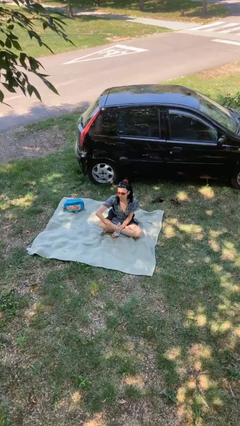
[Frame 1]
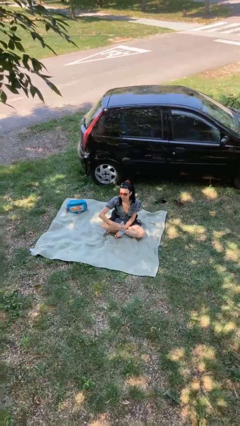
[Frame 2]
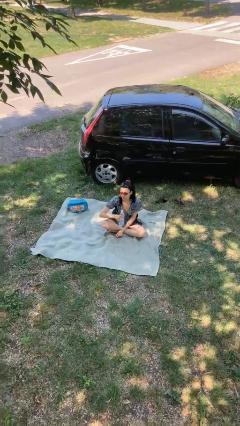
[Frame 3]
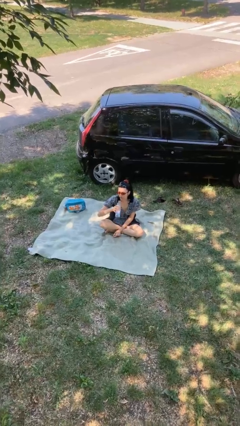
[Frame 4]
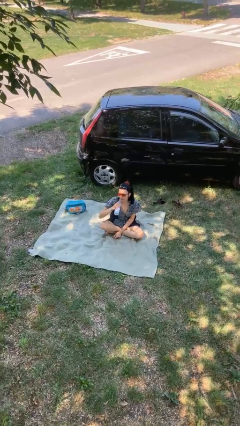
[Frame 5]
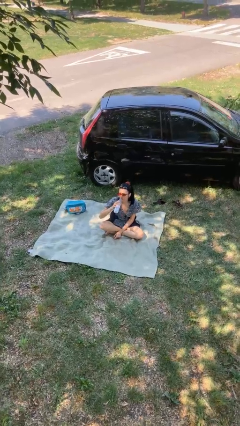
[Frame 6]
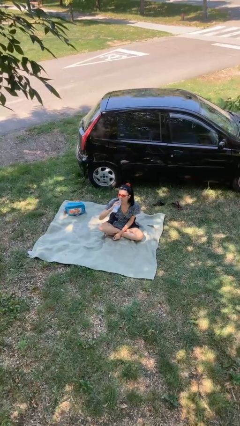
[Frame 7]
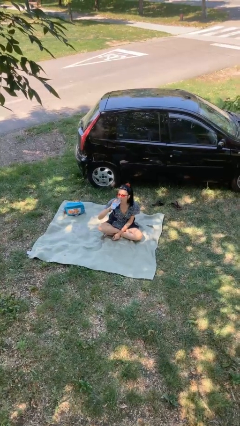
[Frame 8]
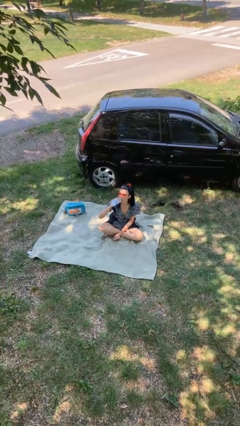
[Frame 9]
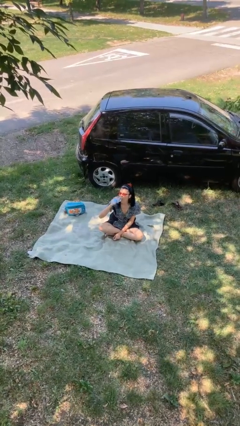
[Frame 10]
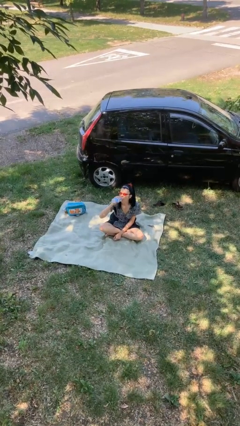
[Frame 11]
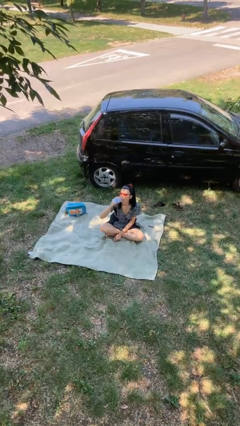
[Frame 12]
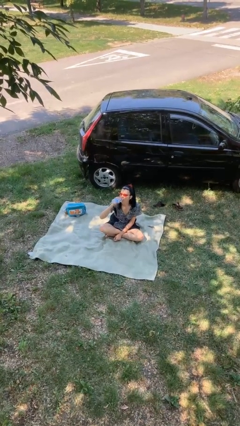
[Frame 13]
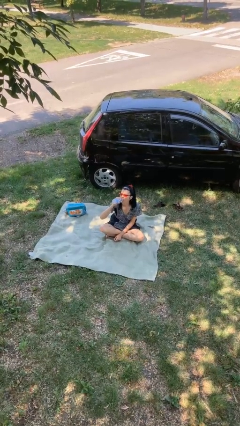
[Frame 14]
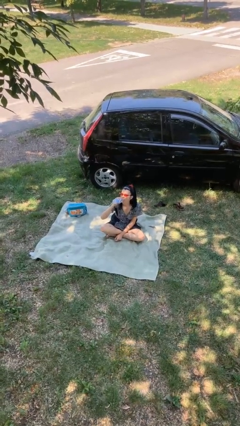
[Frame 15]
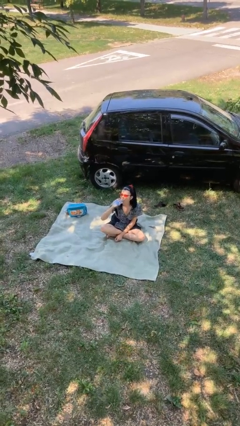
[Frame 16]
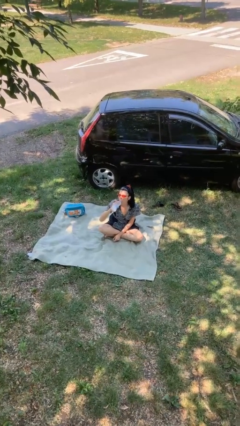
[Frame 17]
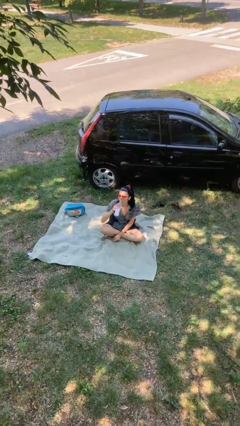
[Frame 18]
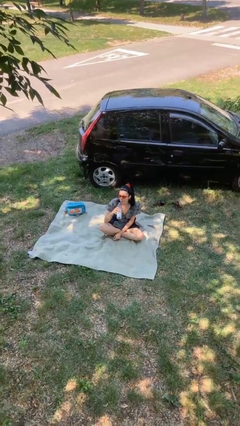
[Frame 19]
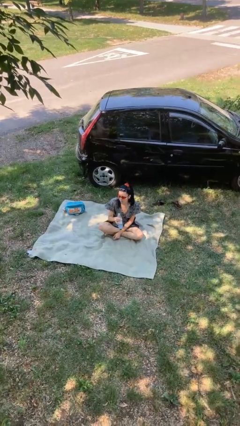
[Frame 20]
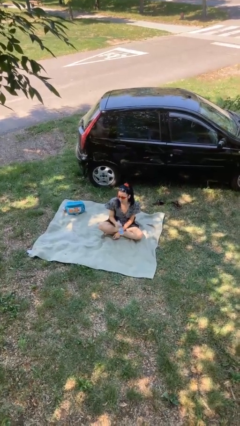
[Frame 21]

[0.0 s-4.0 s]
person drinks from bottle

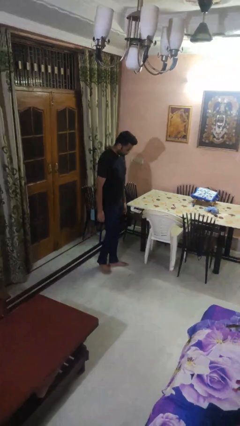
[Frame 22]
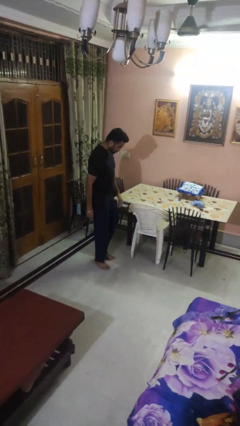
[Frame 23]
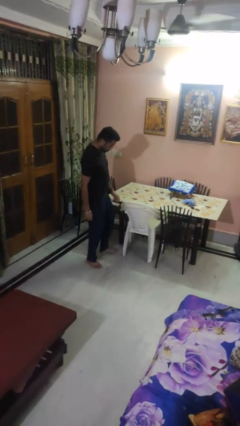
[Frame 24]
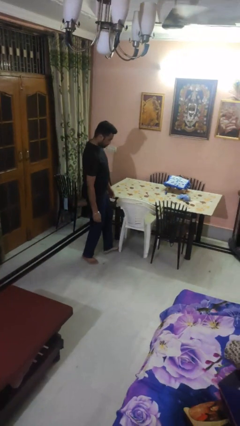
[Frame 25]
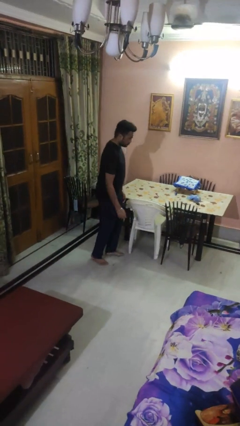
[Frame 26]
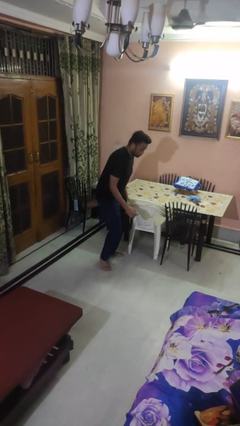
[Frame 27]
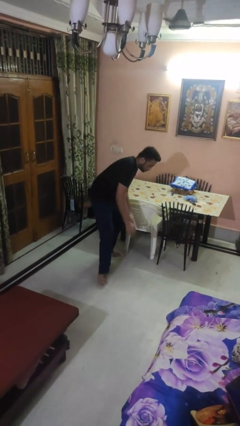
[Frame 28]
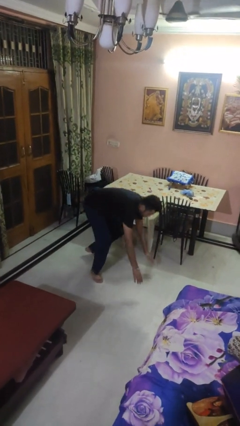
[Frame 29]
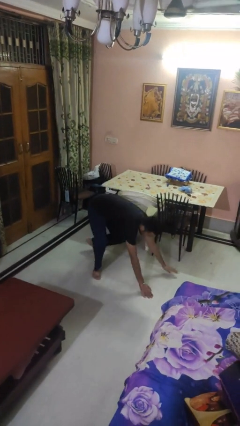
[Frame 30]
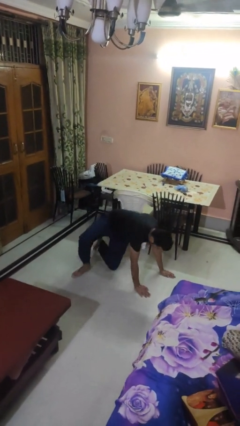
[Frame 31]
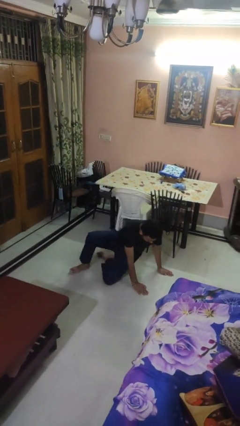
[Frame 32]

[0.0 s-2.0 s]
person trips on object on floor

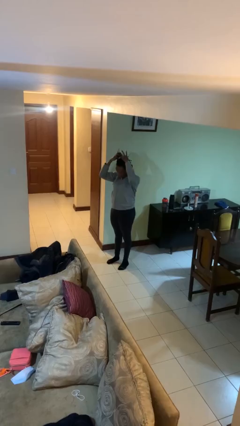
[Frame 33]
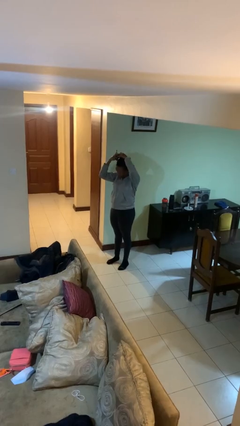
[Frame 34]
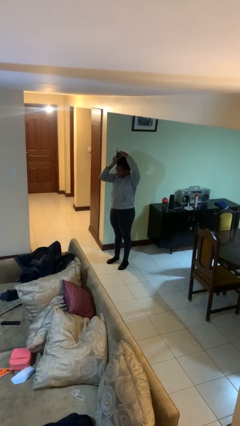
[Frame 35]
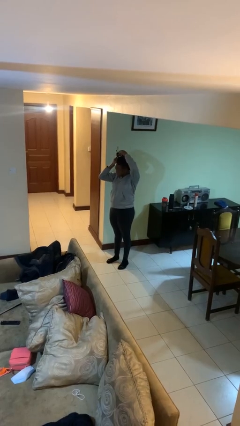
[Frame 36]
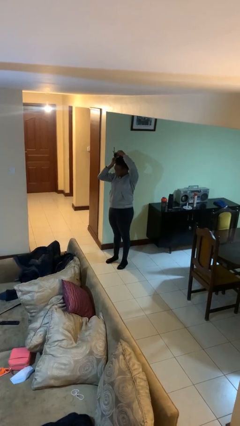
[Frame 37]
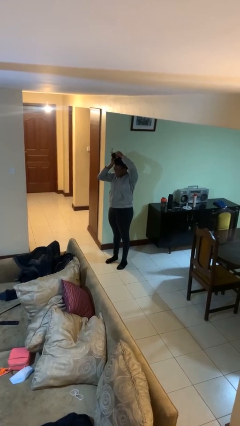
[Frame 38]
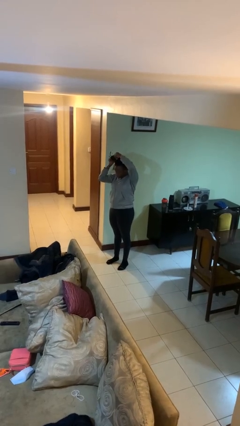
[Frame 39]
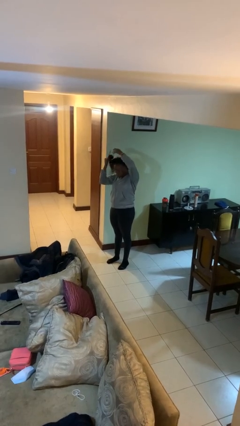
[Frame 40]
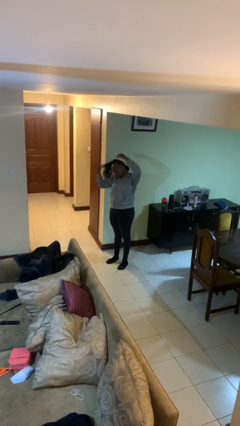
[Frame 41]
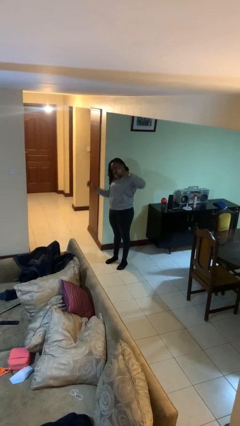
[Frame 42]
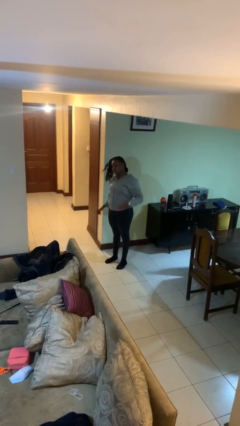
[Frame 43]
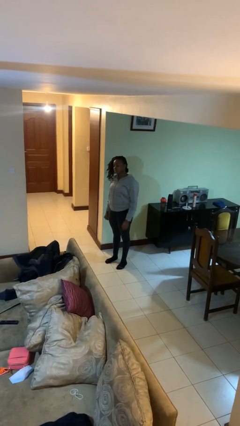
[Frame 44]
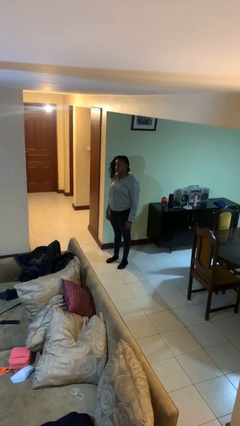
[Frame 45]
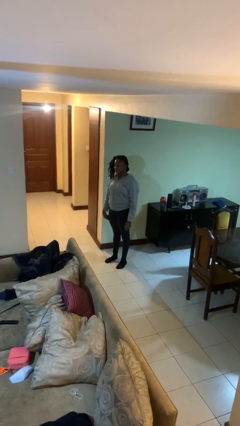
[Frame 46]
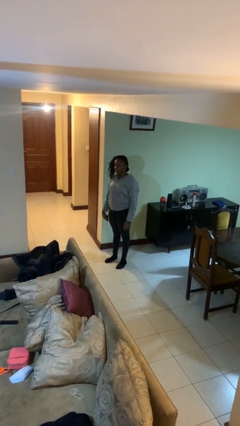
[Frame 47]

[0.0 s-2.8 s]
person takes off hairtie

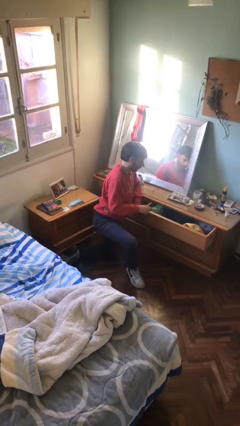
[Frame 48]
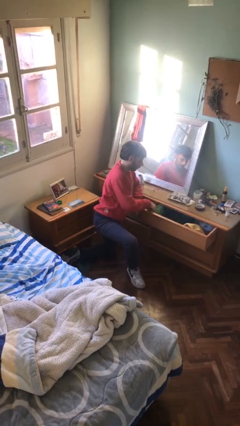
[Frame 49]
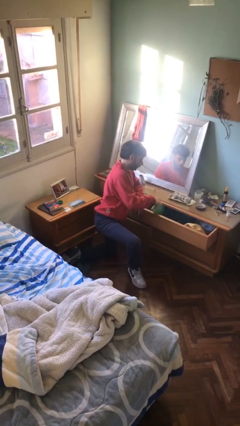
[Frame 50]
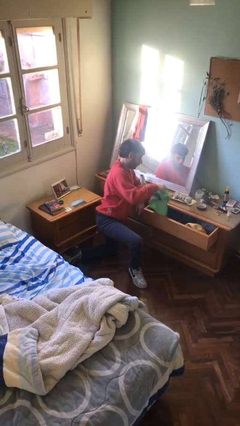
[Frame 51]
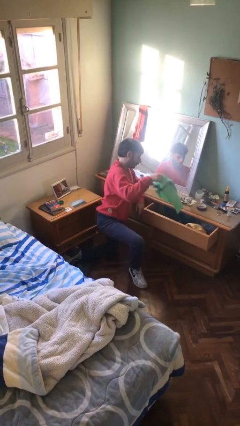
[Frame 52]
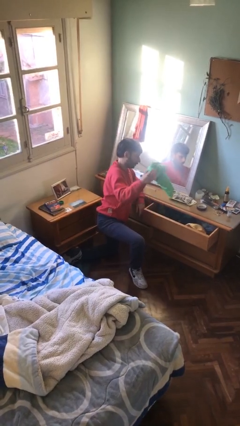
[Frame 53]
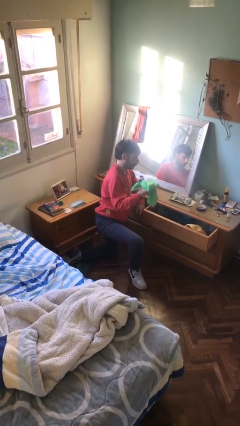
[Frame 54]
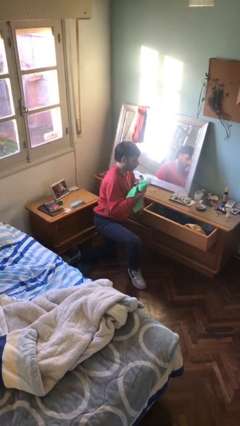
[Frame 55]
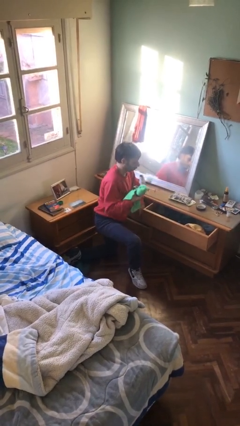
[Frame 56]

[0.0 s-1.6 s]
person takes clothes from dresser

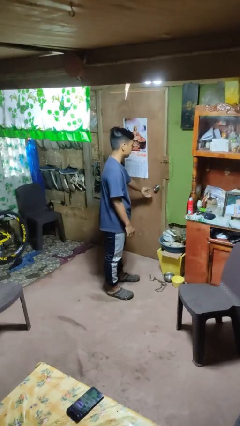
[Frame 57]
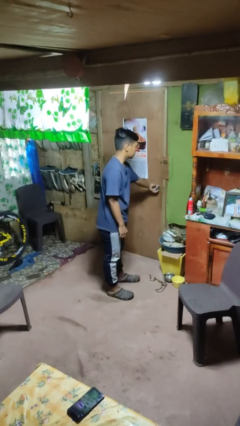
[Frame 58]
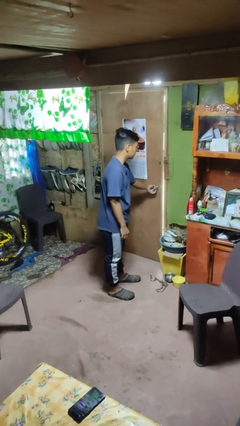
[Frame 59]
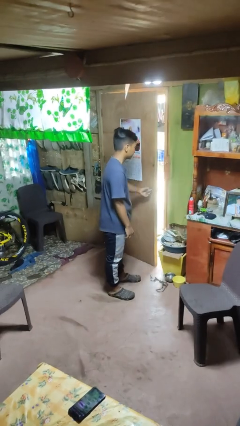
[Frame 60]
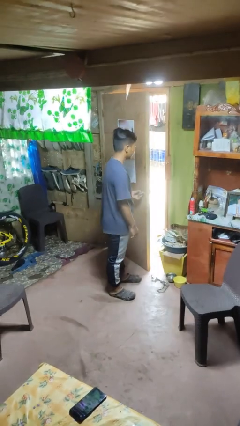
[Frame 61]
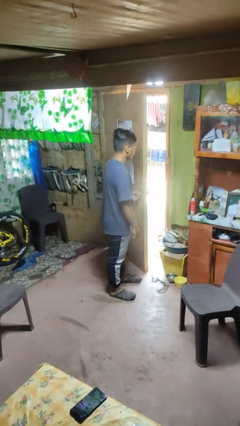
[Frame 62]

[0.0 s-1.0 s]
person opens facility door

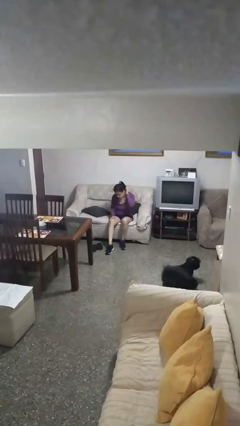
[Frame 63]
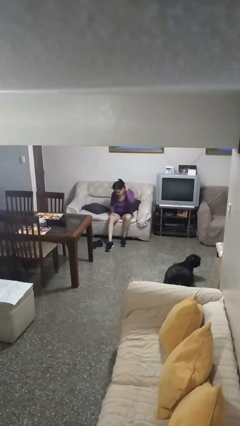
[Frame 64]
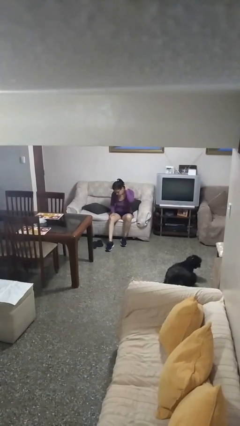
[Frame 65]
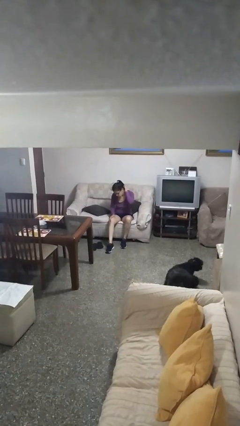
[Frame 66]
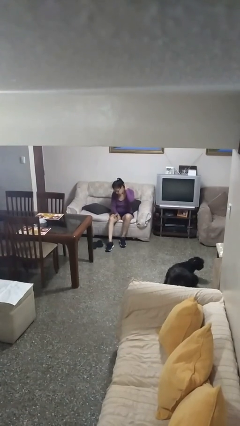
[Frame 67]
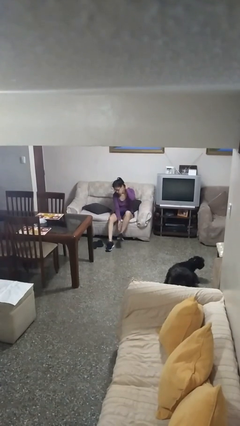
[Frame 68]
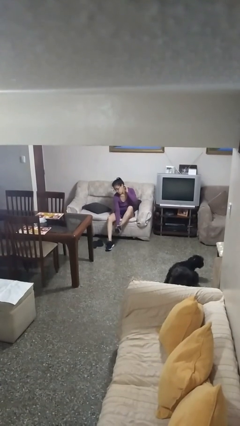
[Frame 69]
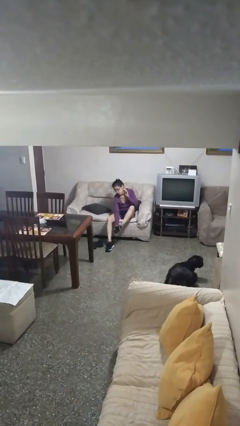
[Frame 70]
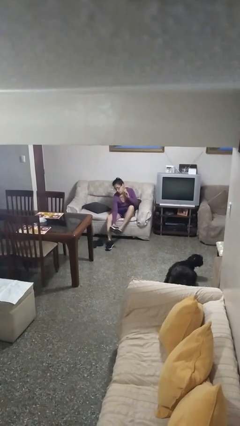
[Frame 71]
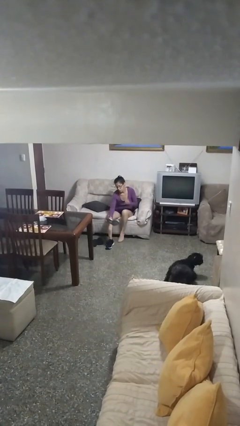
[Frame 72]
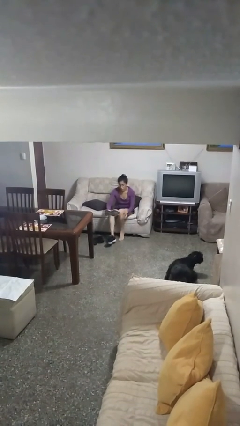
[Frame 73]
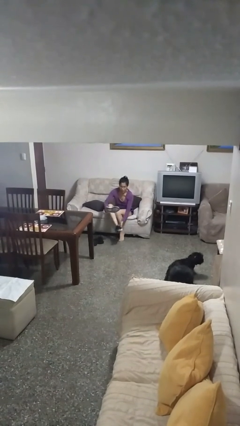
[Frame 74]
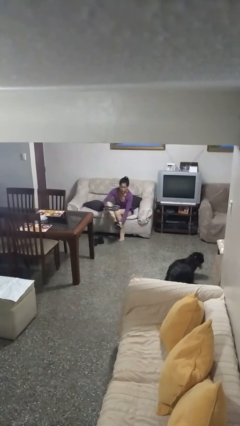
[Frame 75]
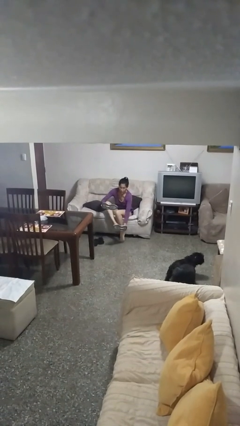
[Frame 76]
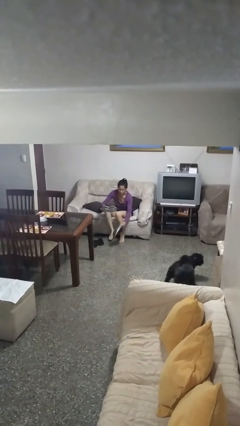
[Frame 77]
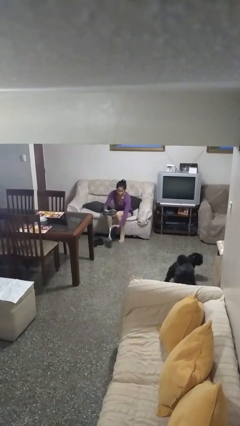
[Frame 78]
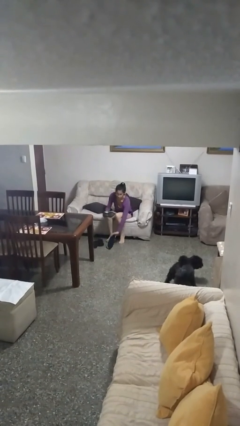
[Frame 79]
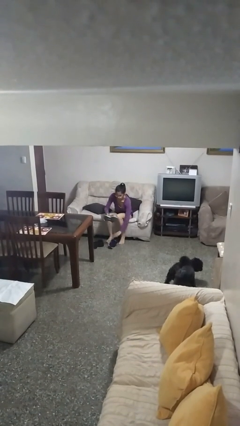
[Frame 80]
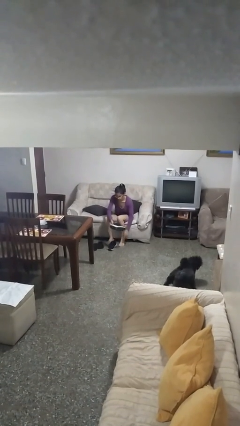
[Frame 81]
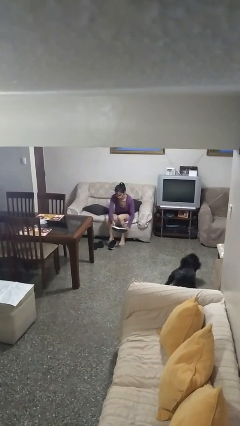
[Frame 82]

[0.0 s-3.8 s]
person takes off shoes

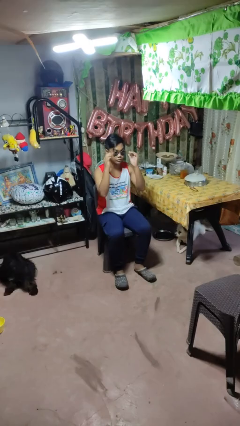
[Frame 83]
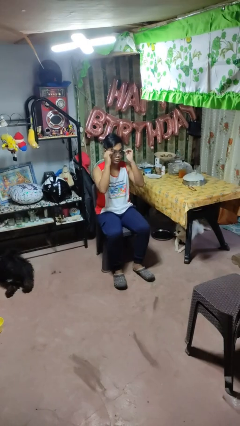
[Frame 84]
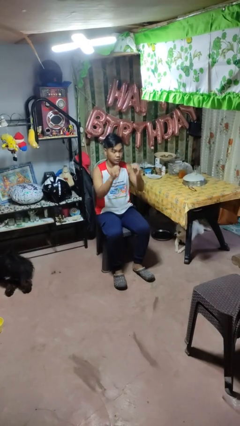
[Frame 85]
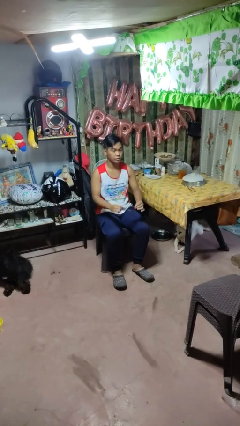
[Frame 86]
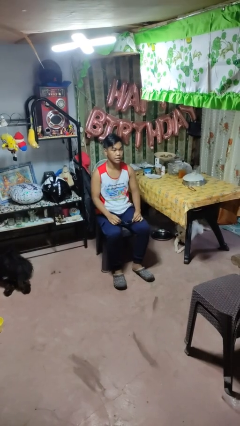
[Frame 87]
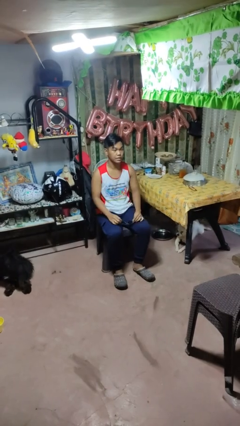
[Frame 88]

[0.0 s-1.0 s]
person takes off sunglasses

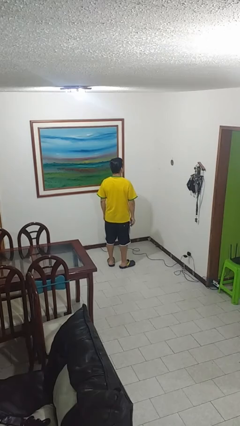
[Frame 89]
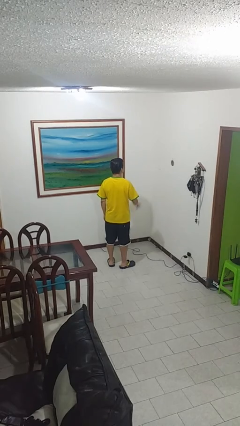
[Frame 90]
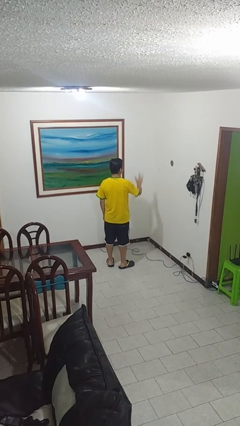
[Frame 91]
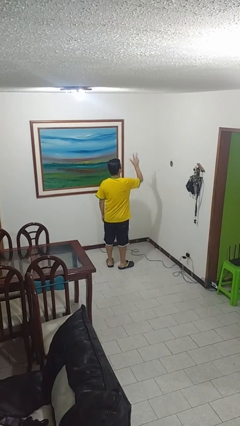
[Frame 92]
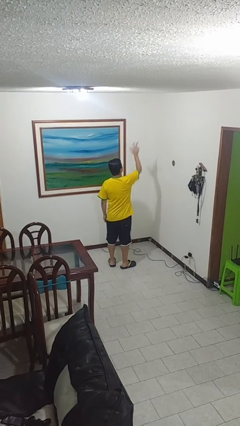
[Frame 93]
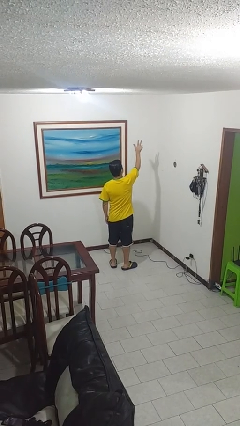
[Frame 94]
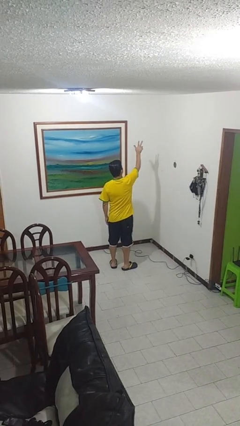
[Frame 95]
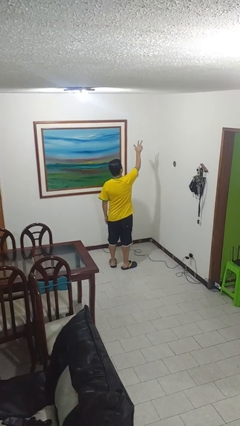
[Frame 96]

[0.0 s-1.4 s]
person gestures number three
